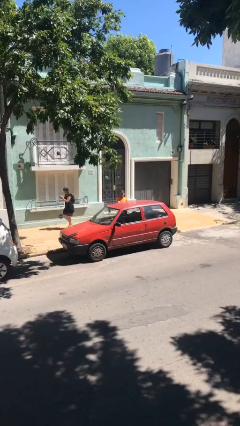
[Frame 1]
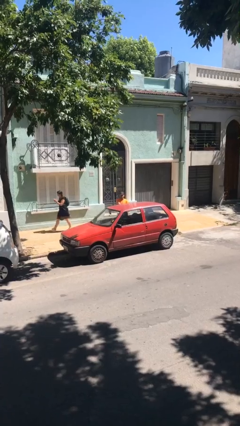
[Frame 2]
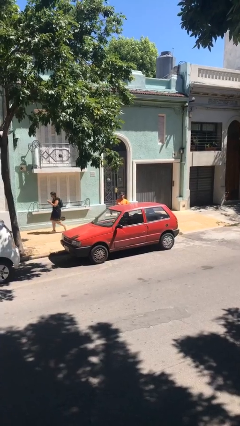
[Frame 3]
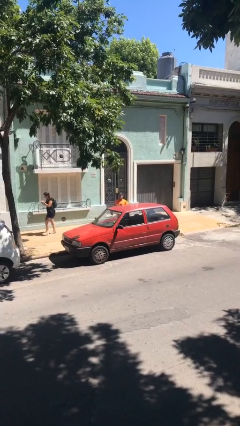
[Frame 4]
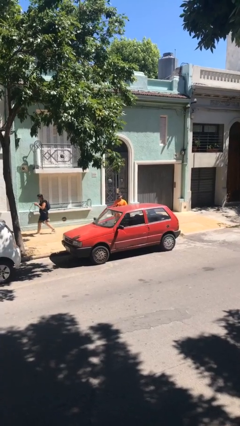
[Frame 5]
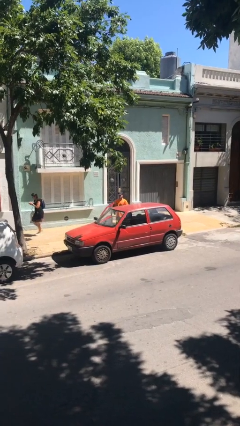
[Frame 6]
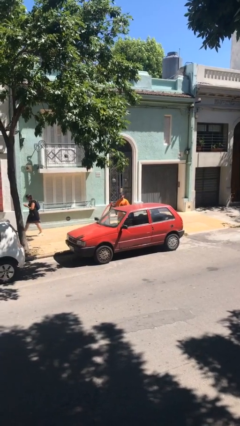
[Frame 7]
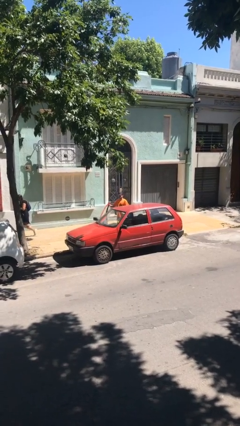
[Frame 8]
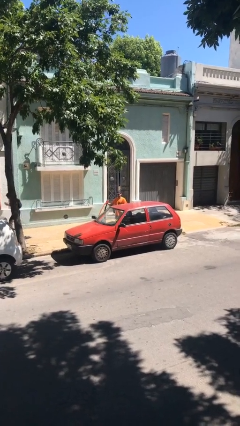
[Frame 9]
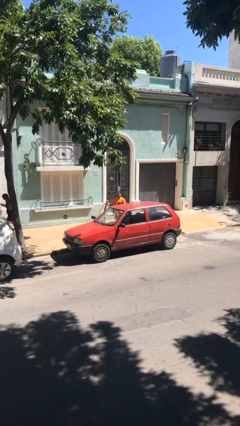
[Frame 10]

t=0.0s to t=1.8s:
person opens car door

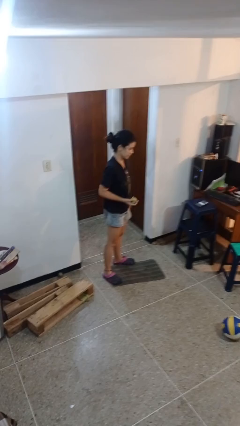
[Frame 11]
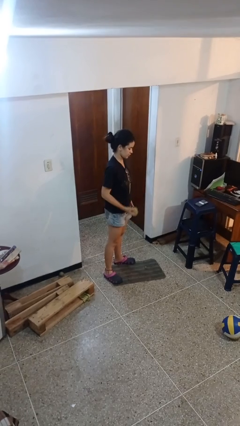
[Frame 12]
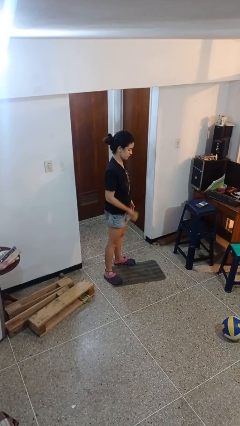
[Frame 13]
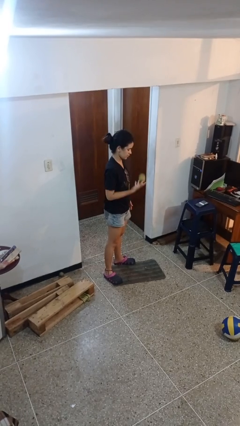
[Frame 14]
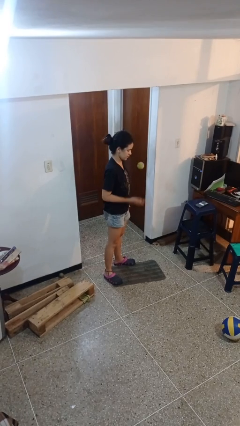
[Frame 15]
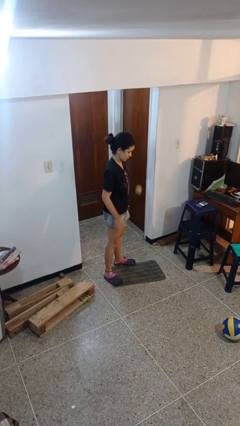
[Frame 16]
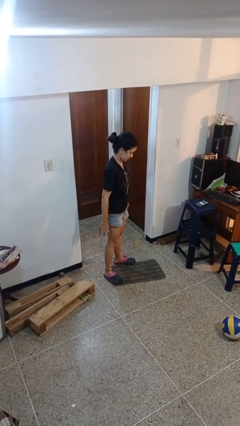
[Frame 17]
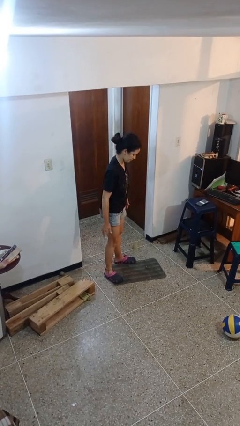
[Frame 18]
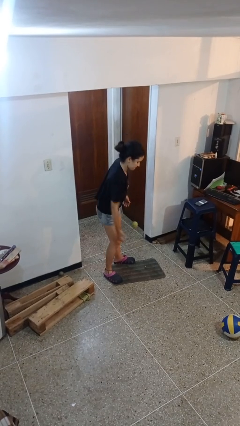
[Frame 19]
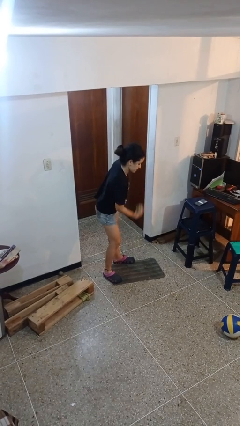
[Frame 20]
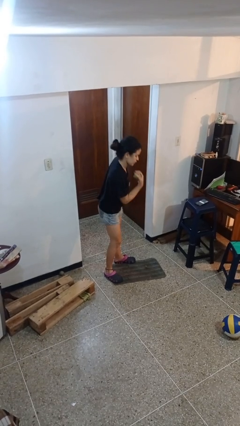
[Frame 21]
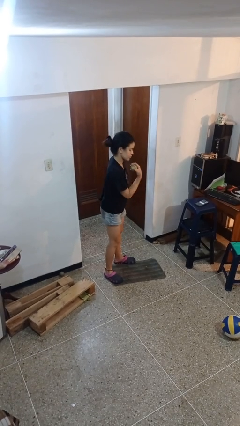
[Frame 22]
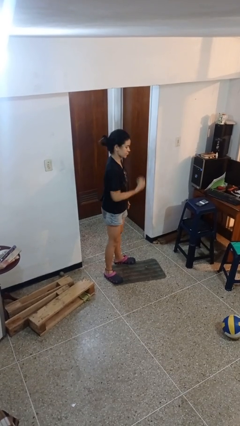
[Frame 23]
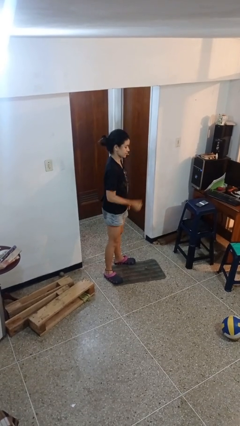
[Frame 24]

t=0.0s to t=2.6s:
person bounces ball on floor

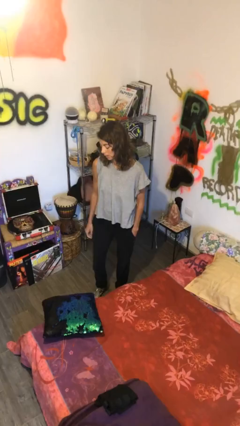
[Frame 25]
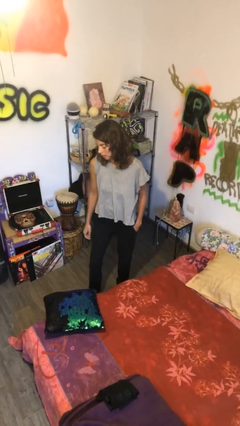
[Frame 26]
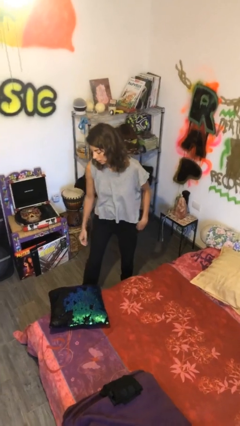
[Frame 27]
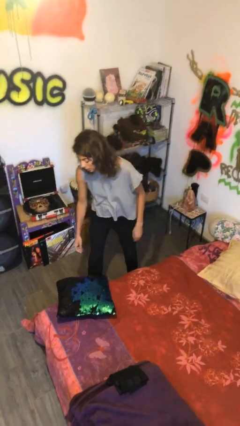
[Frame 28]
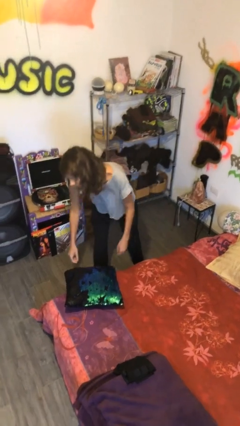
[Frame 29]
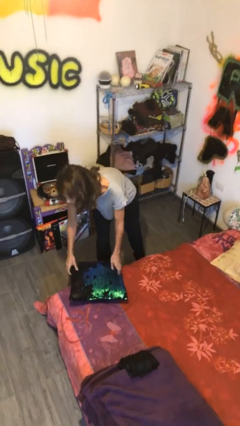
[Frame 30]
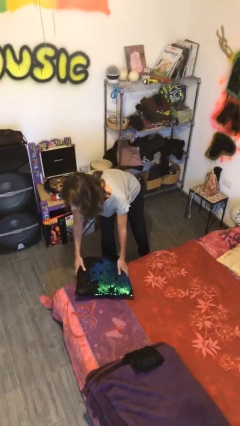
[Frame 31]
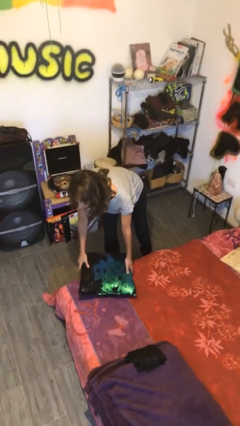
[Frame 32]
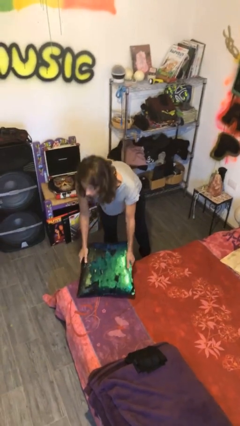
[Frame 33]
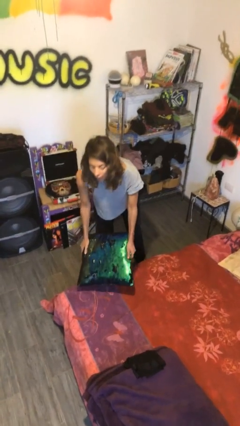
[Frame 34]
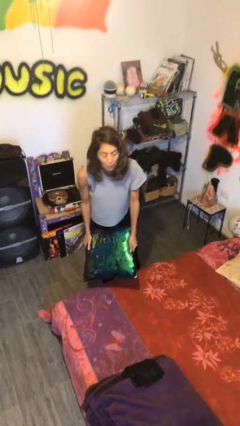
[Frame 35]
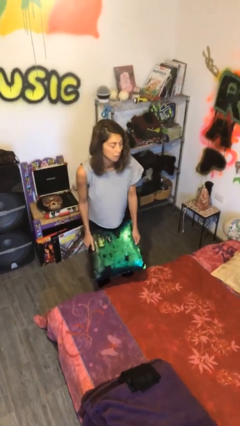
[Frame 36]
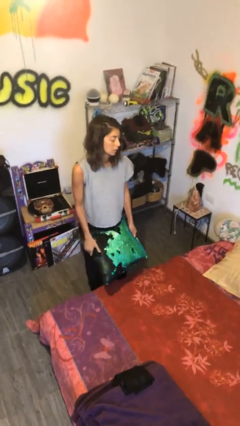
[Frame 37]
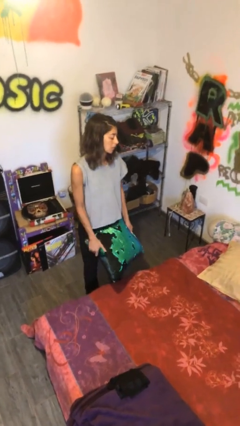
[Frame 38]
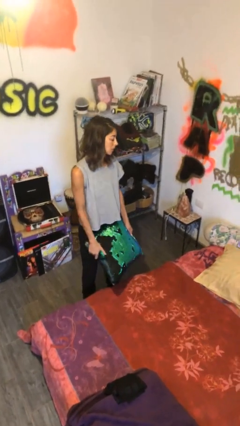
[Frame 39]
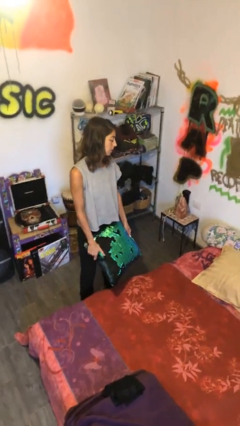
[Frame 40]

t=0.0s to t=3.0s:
person picks up object from bed

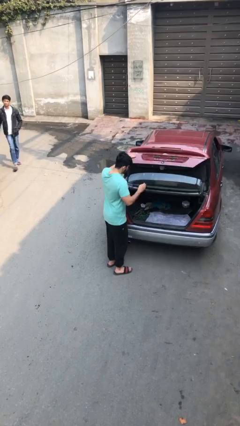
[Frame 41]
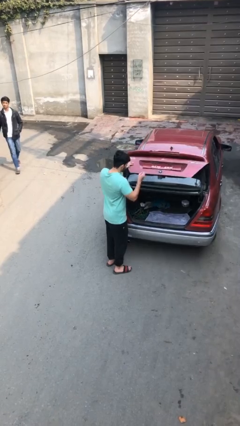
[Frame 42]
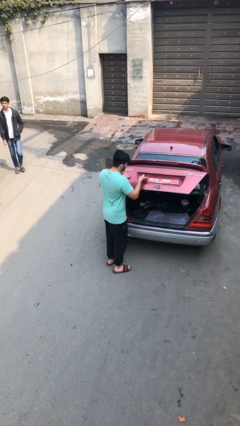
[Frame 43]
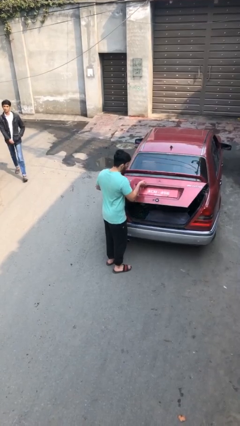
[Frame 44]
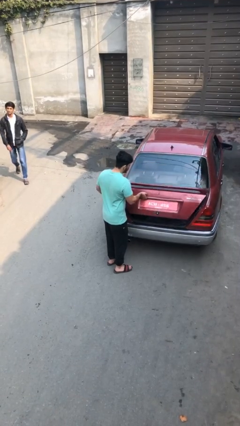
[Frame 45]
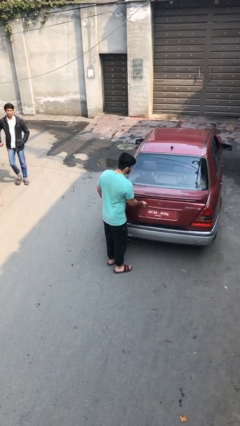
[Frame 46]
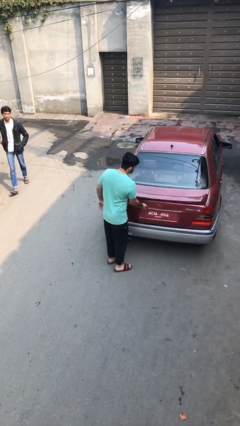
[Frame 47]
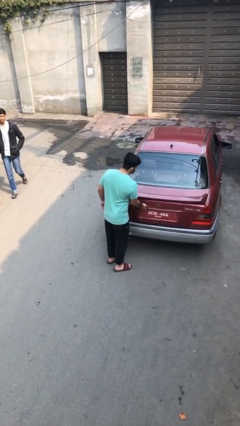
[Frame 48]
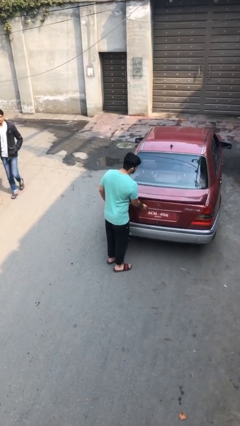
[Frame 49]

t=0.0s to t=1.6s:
person closes car trunk

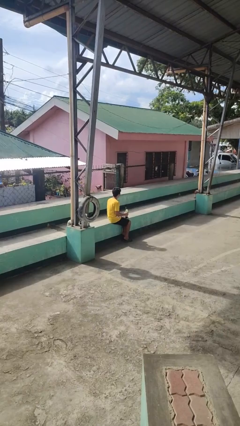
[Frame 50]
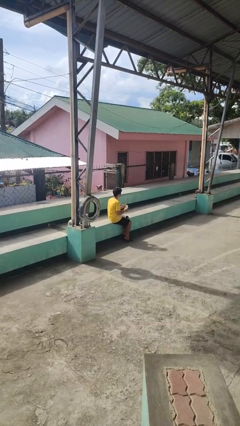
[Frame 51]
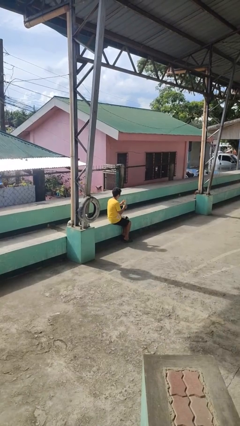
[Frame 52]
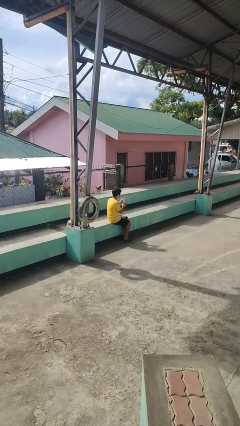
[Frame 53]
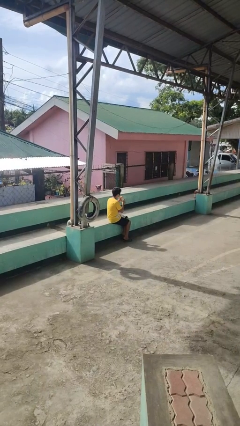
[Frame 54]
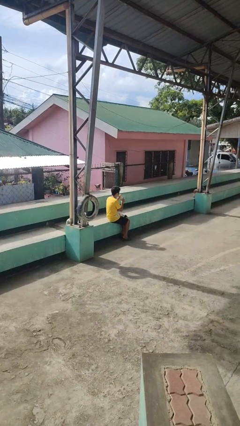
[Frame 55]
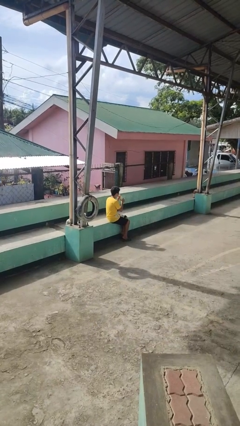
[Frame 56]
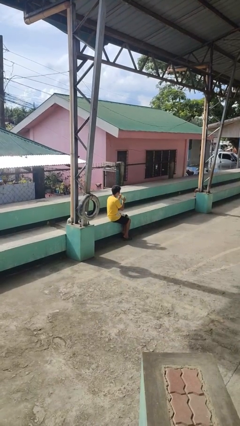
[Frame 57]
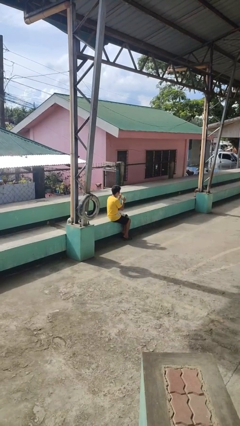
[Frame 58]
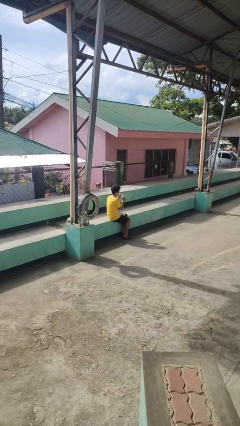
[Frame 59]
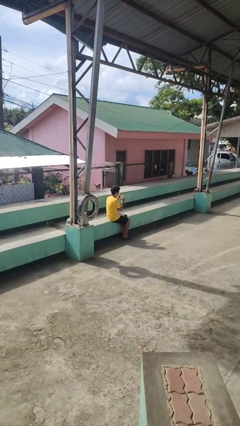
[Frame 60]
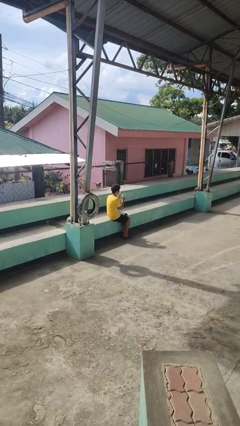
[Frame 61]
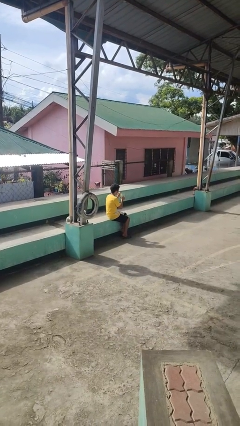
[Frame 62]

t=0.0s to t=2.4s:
person drinks from straw

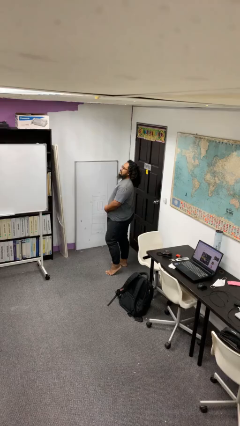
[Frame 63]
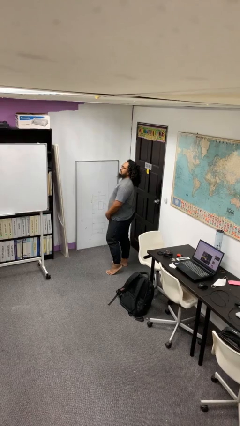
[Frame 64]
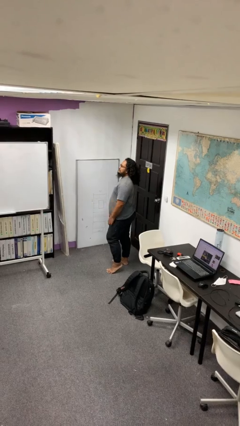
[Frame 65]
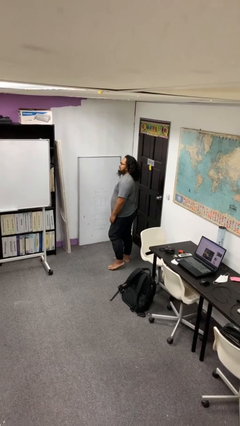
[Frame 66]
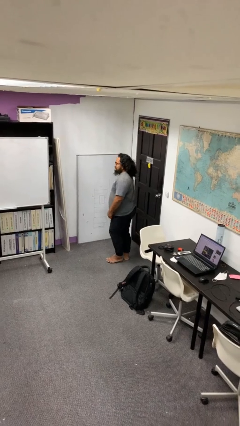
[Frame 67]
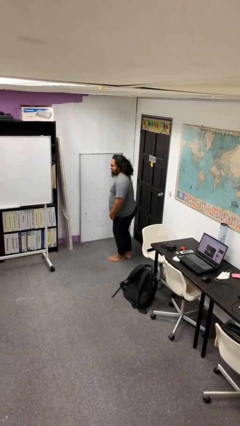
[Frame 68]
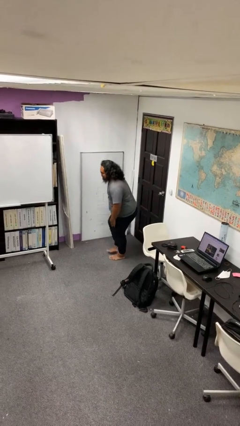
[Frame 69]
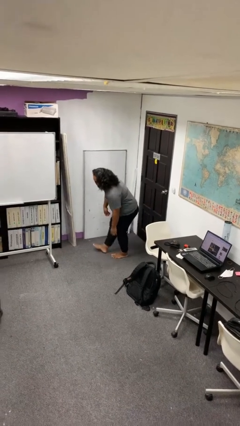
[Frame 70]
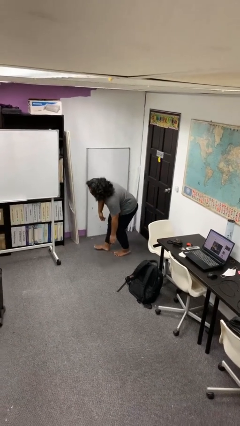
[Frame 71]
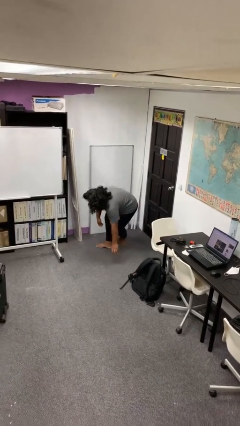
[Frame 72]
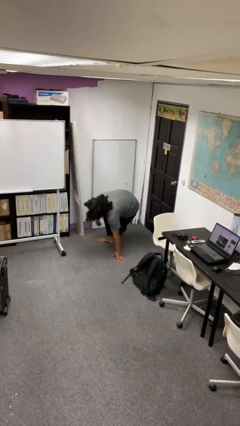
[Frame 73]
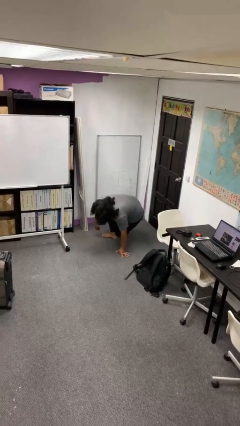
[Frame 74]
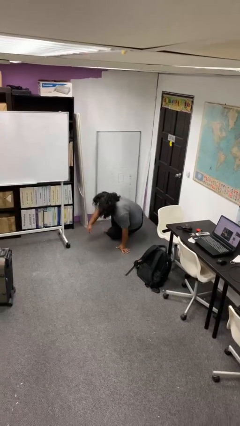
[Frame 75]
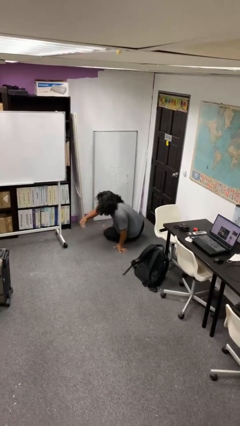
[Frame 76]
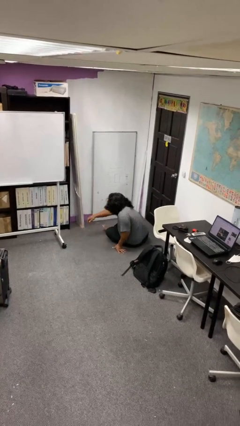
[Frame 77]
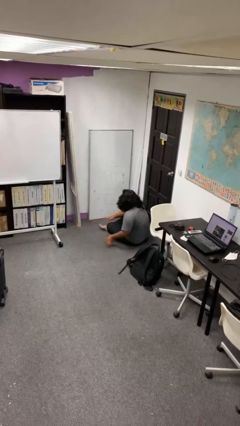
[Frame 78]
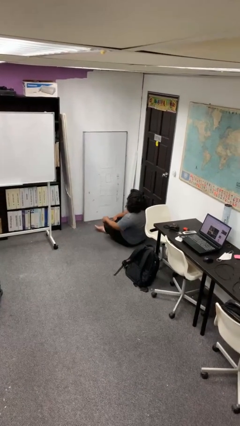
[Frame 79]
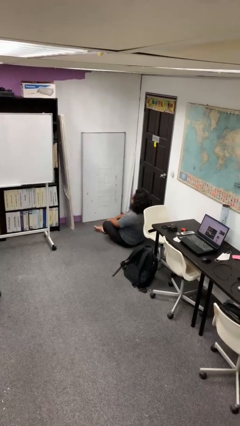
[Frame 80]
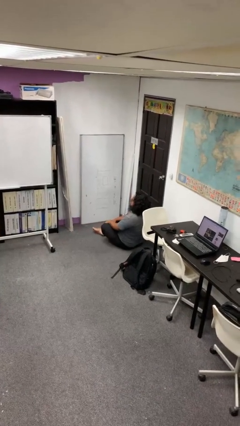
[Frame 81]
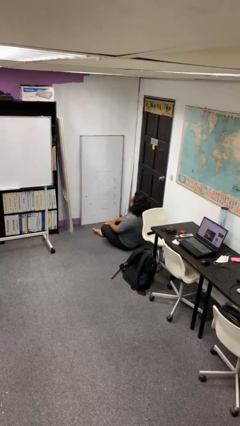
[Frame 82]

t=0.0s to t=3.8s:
person sits crisscross

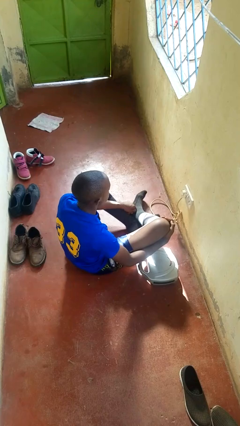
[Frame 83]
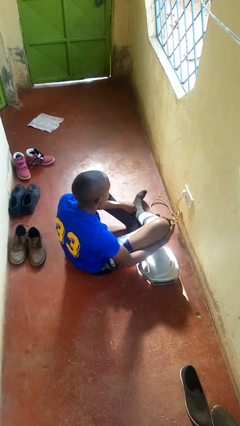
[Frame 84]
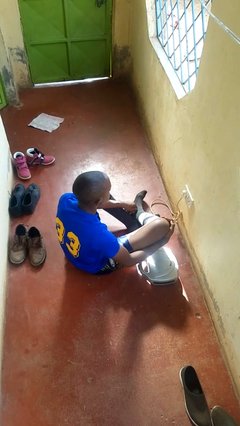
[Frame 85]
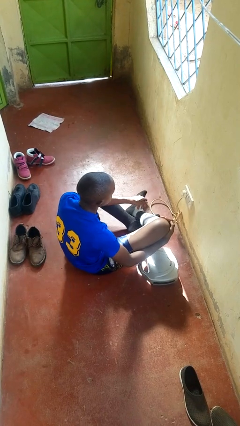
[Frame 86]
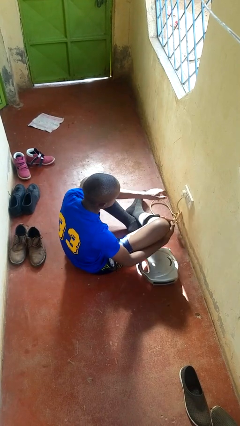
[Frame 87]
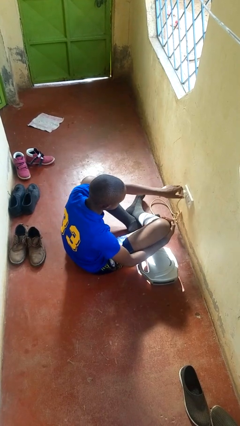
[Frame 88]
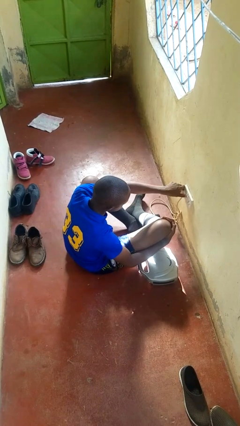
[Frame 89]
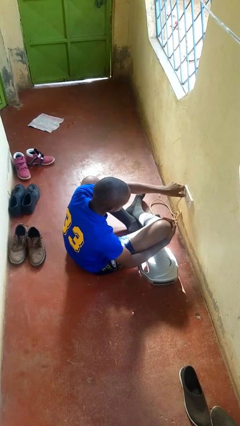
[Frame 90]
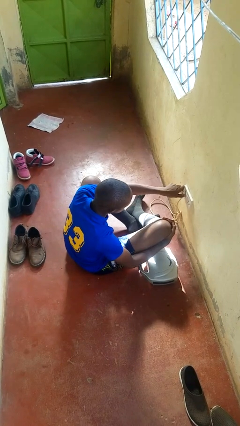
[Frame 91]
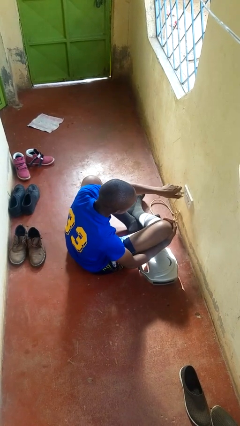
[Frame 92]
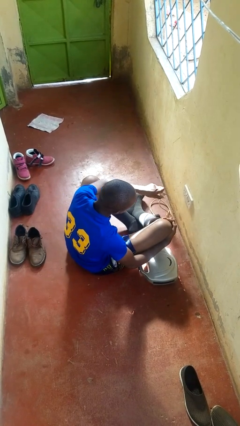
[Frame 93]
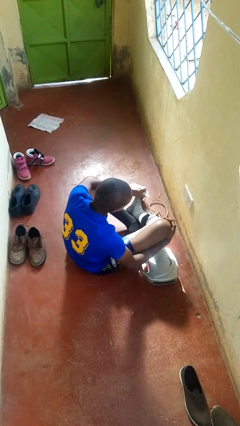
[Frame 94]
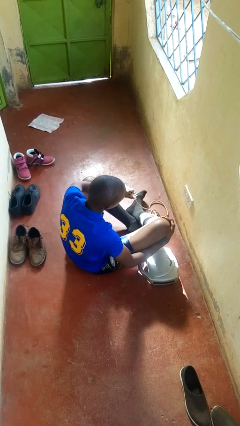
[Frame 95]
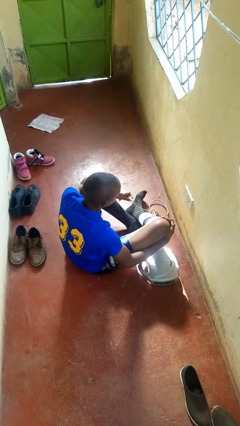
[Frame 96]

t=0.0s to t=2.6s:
person unplugs from electrical socket
